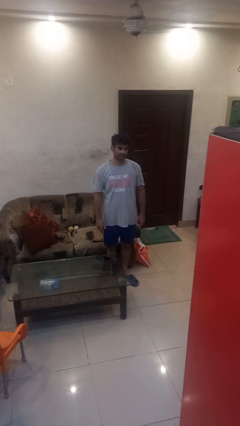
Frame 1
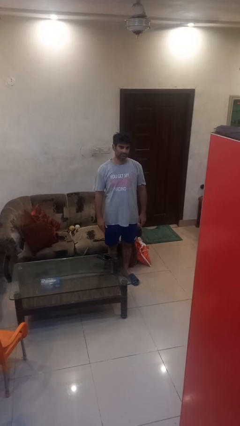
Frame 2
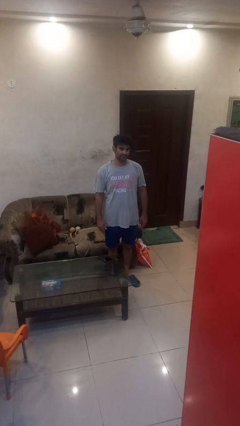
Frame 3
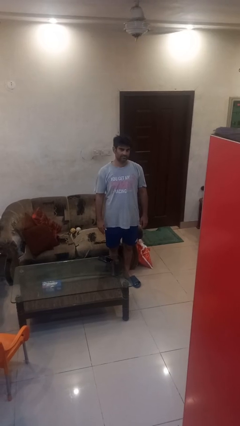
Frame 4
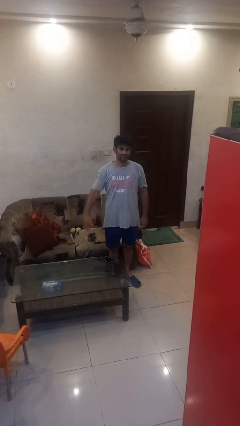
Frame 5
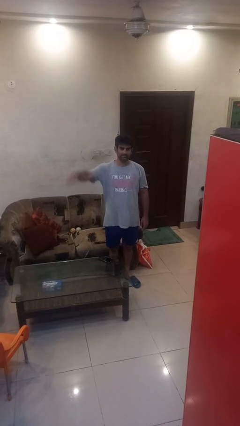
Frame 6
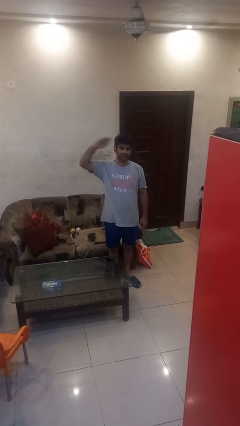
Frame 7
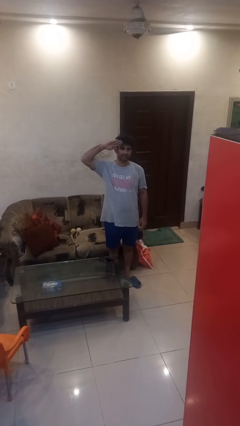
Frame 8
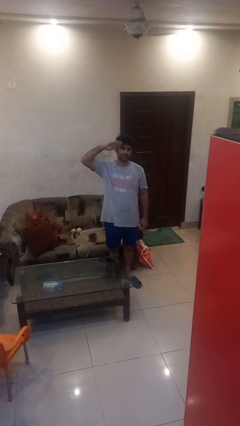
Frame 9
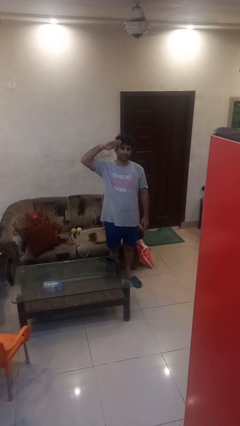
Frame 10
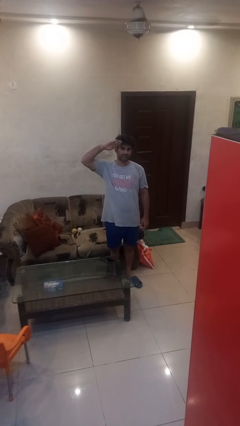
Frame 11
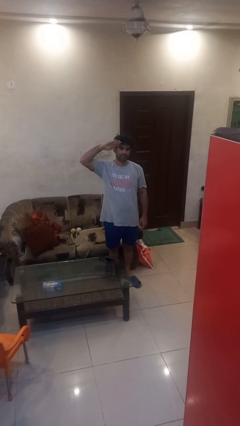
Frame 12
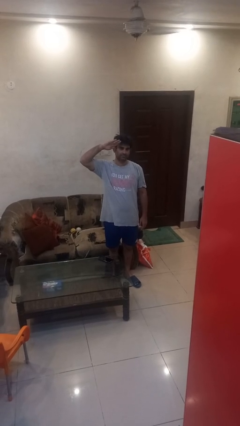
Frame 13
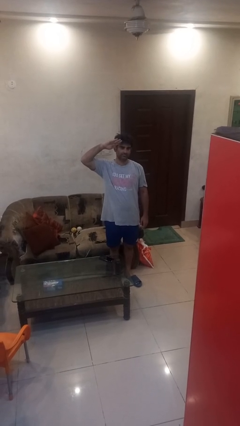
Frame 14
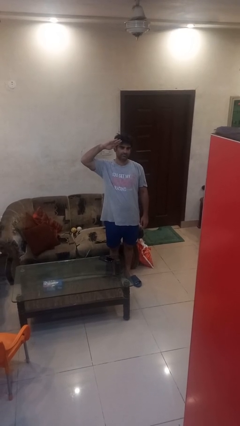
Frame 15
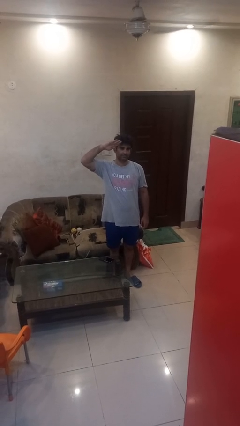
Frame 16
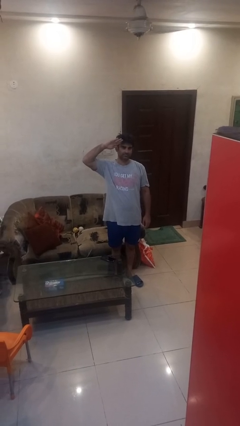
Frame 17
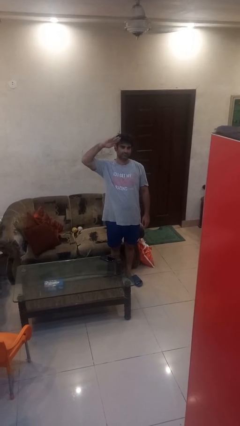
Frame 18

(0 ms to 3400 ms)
person salutes

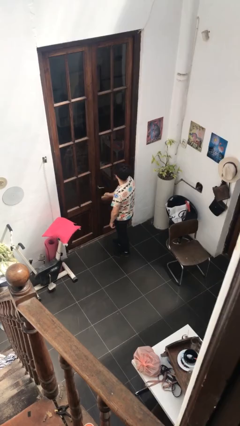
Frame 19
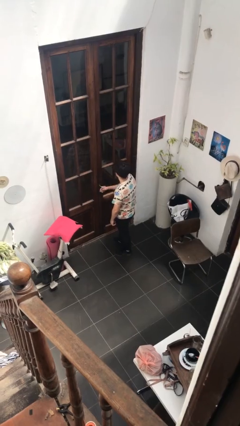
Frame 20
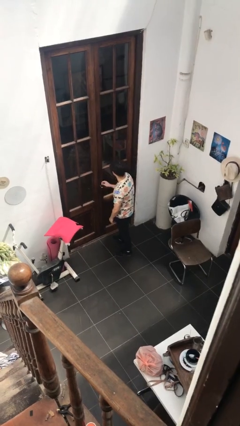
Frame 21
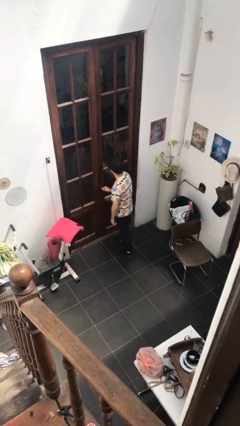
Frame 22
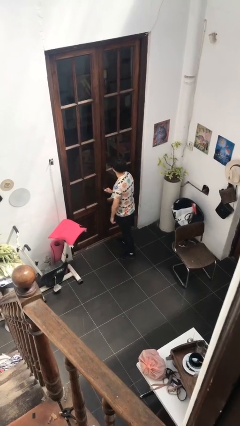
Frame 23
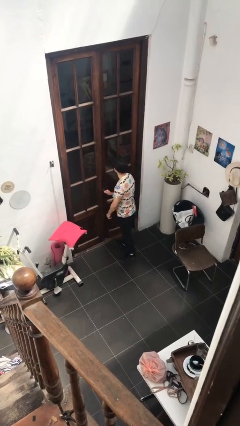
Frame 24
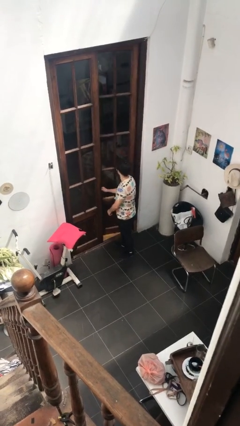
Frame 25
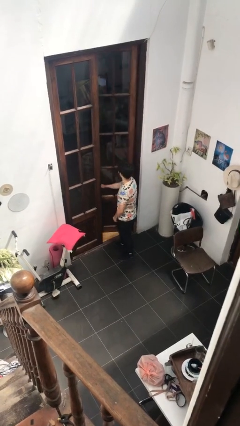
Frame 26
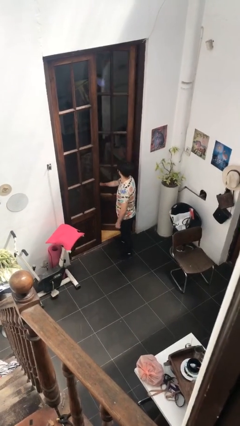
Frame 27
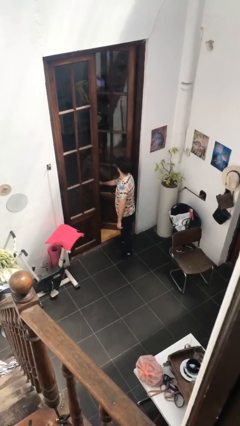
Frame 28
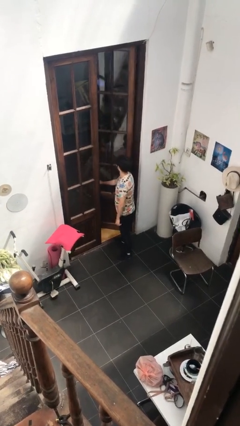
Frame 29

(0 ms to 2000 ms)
person opens facility door

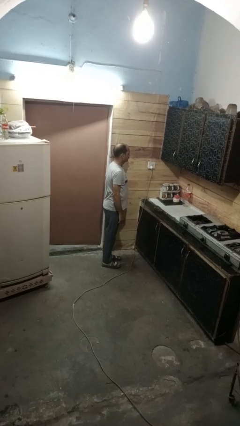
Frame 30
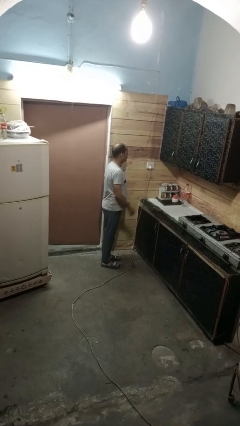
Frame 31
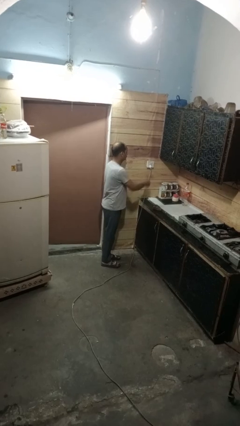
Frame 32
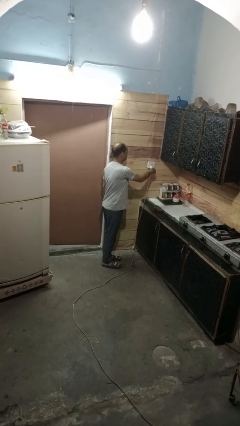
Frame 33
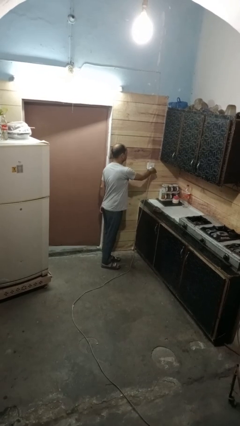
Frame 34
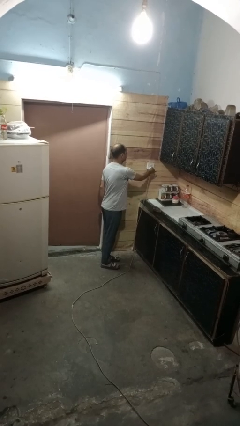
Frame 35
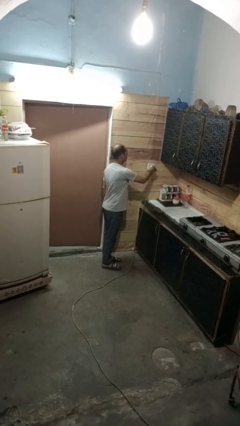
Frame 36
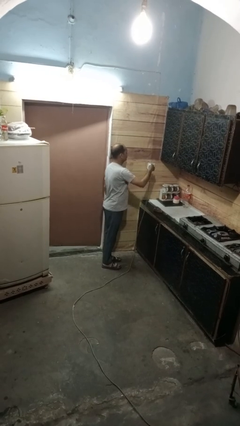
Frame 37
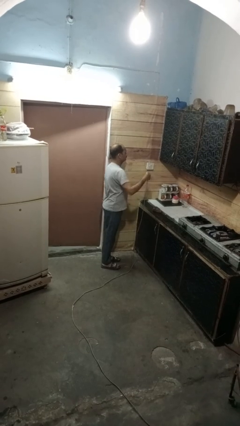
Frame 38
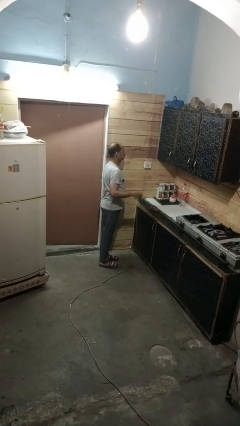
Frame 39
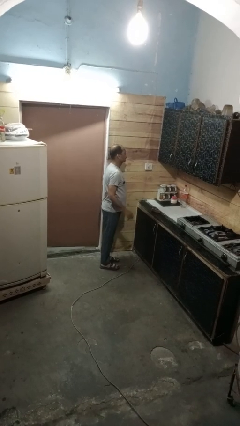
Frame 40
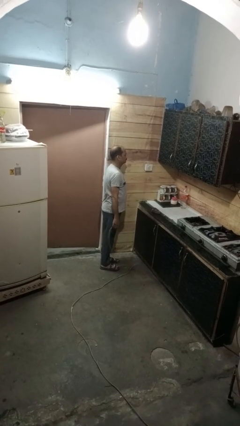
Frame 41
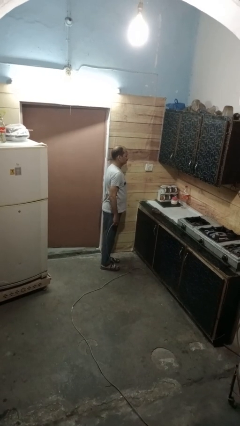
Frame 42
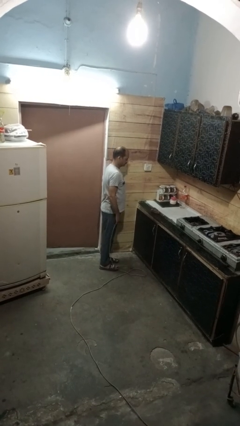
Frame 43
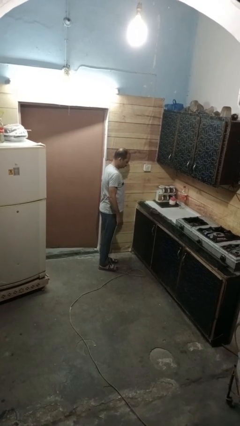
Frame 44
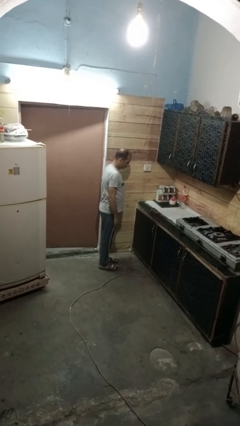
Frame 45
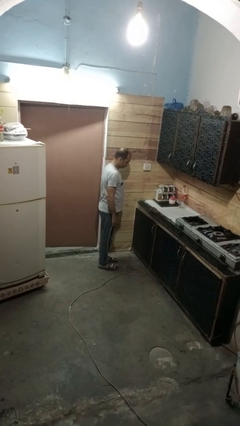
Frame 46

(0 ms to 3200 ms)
person unplugs from electrical socket

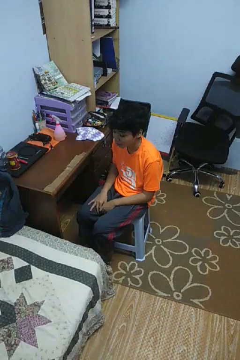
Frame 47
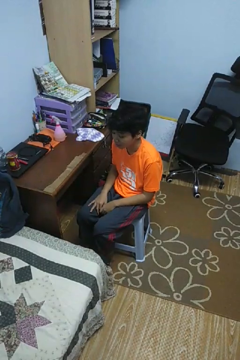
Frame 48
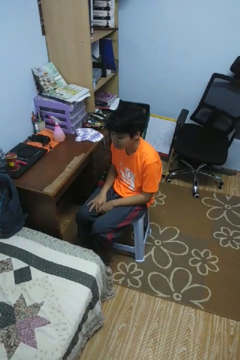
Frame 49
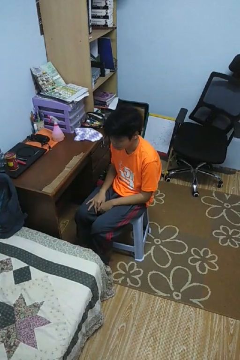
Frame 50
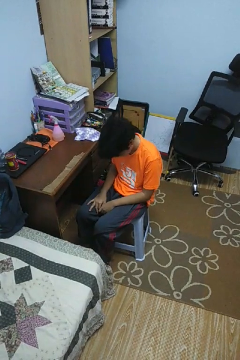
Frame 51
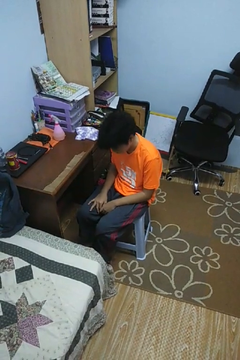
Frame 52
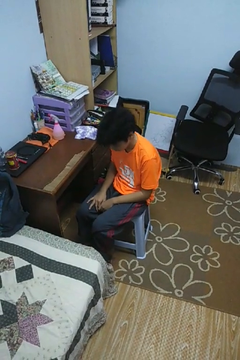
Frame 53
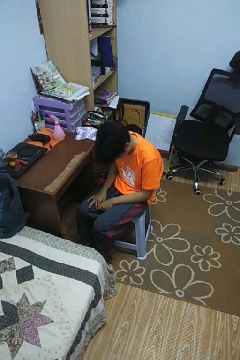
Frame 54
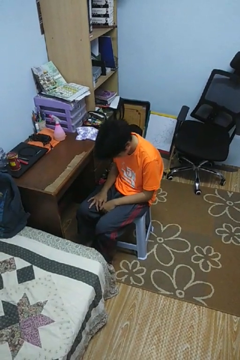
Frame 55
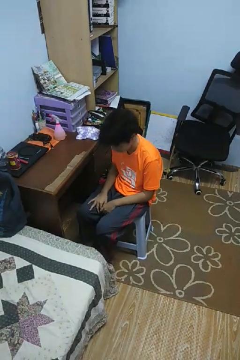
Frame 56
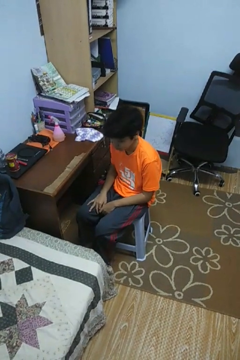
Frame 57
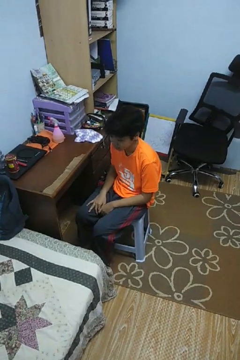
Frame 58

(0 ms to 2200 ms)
person nods head

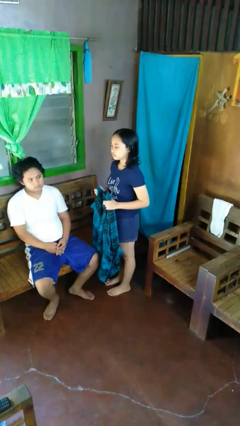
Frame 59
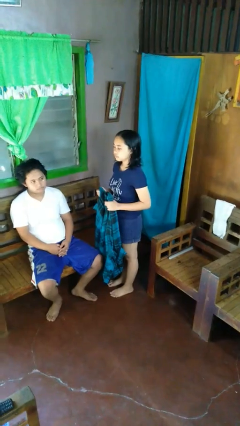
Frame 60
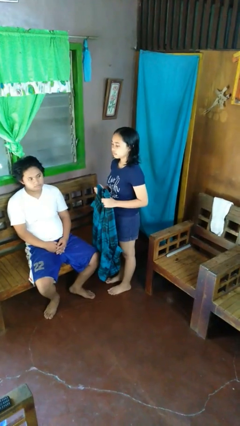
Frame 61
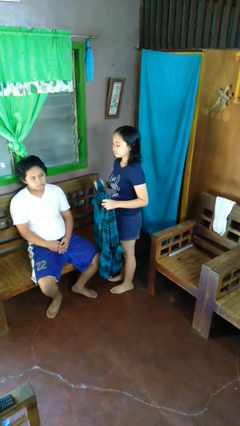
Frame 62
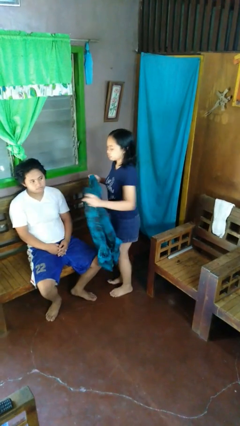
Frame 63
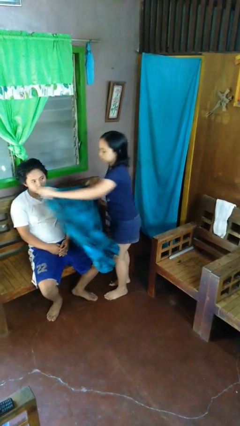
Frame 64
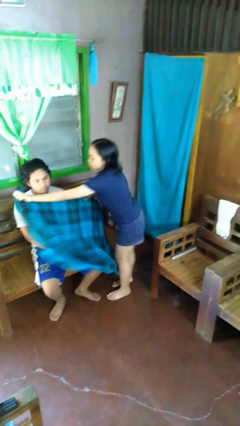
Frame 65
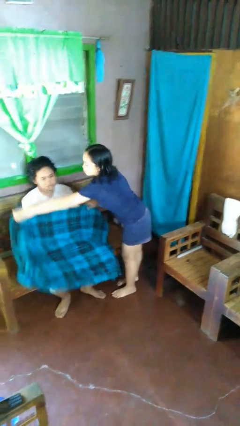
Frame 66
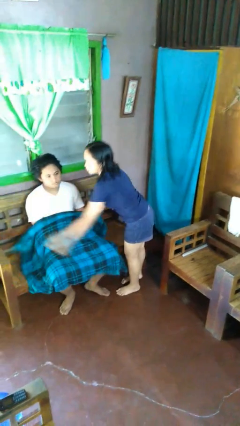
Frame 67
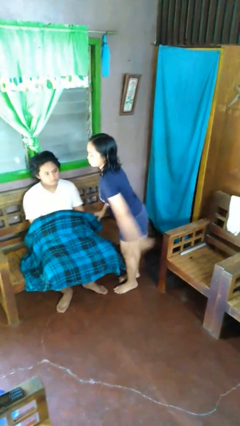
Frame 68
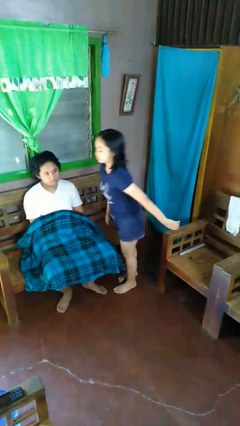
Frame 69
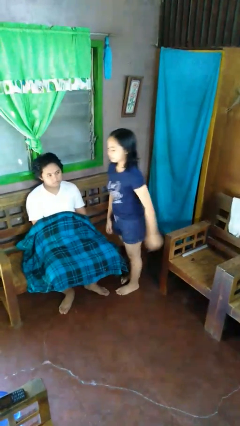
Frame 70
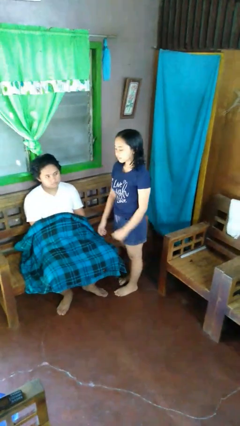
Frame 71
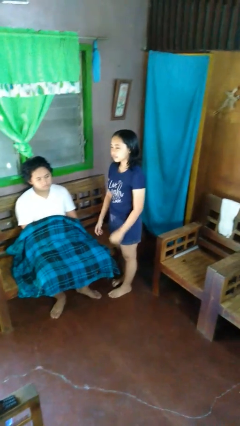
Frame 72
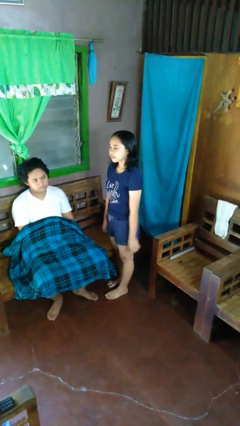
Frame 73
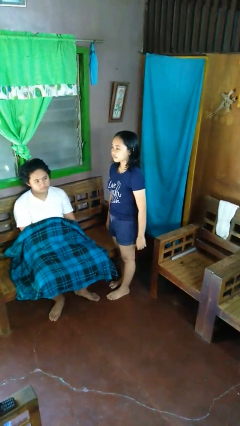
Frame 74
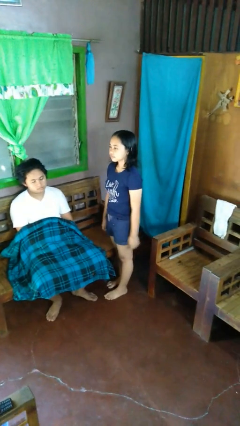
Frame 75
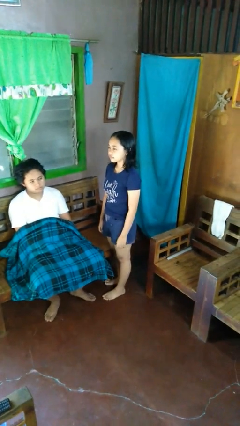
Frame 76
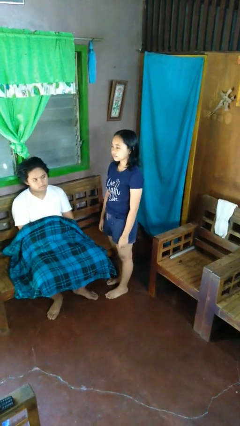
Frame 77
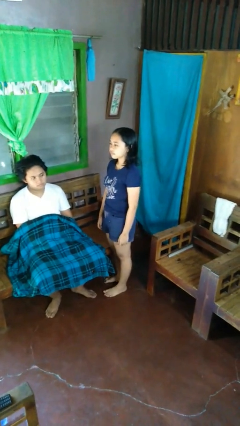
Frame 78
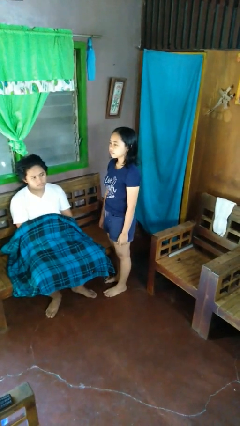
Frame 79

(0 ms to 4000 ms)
person covers friend with blanket

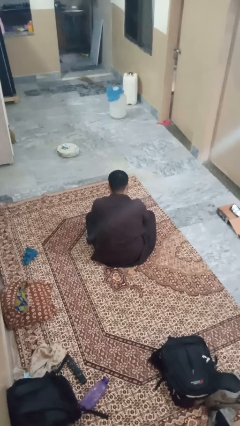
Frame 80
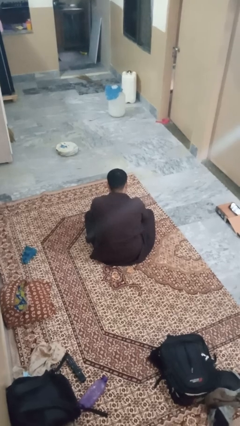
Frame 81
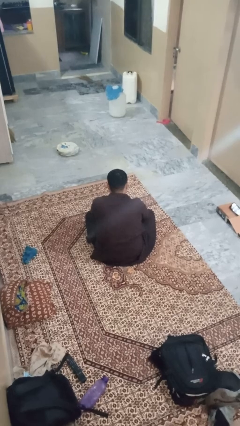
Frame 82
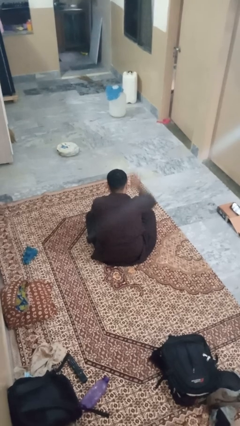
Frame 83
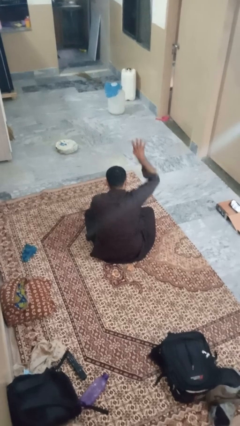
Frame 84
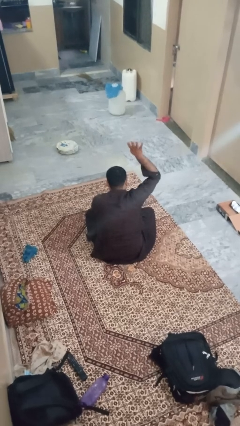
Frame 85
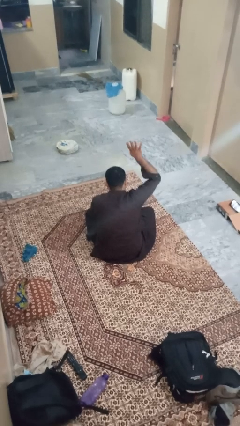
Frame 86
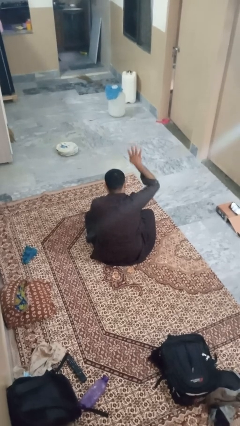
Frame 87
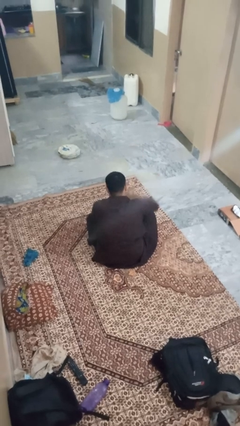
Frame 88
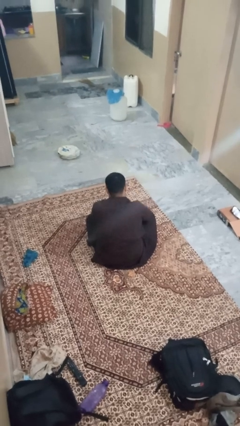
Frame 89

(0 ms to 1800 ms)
person gestures number four

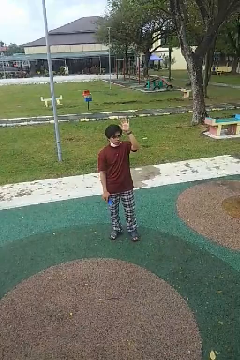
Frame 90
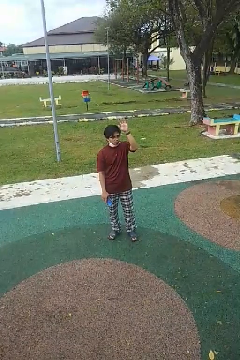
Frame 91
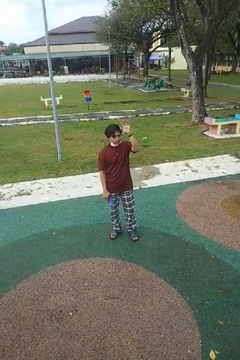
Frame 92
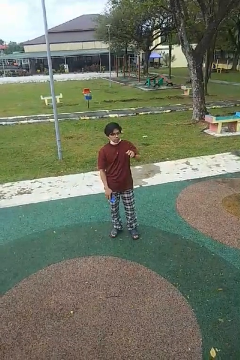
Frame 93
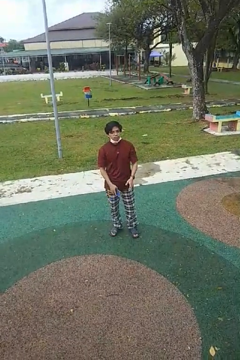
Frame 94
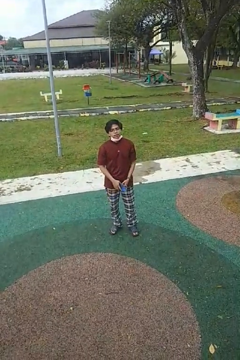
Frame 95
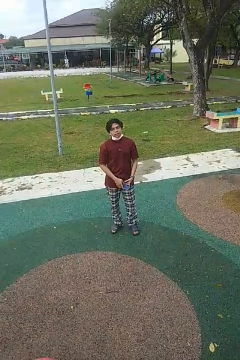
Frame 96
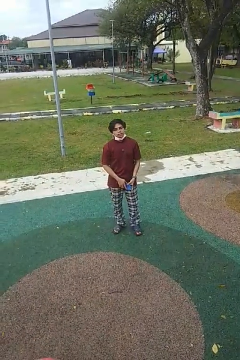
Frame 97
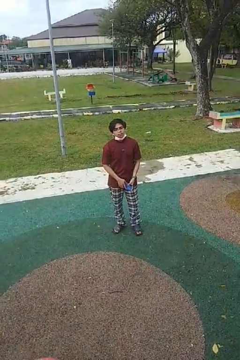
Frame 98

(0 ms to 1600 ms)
person gestures lower hand
